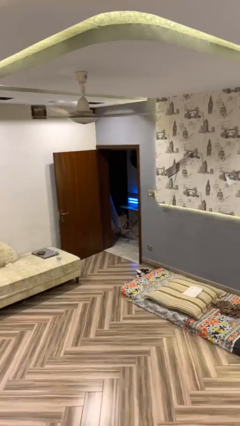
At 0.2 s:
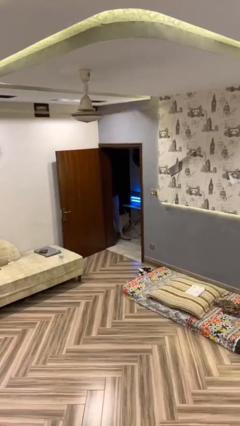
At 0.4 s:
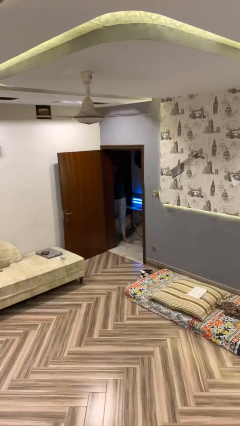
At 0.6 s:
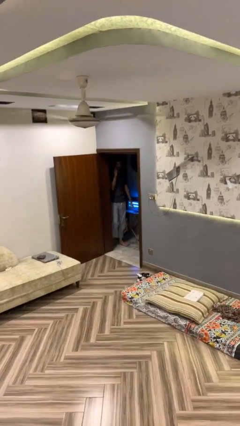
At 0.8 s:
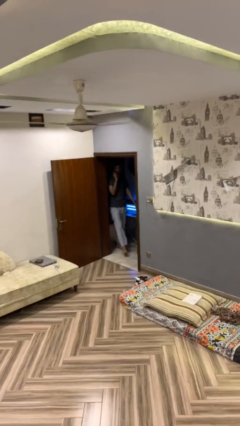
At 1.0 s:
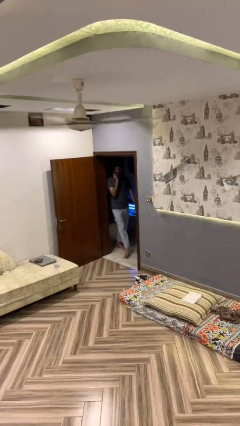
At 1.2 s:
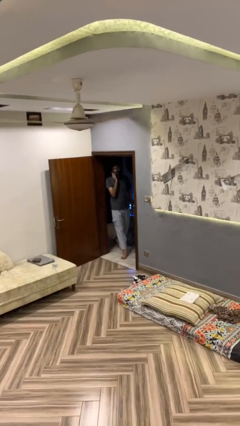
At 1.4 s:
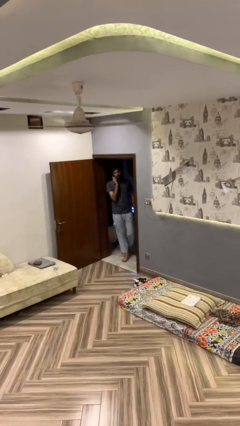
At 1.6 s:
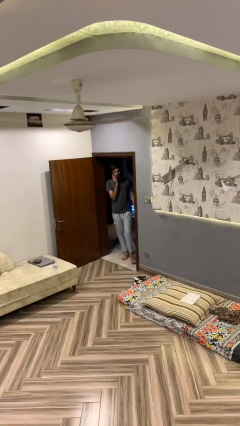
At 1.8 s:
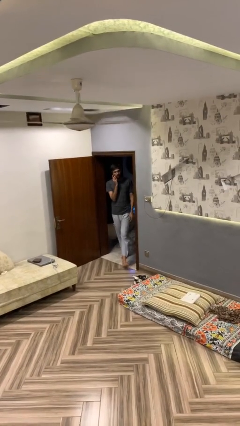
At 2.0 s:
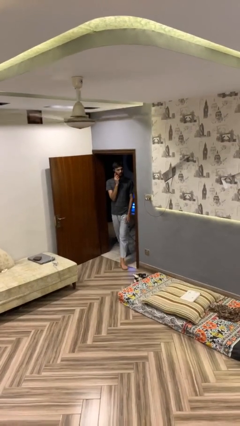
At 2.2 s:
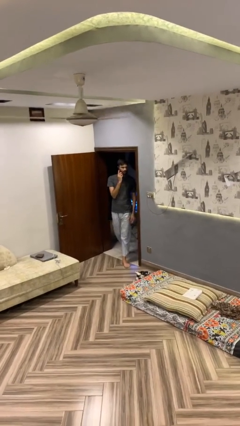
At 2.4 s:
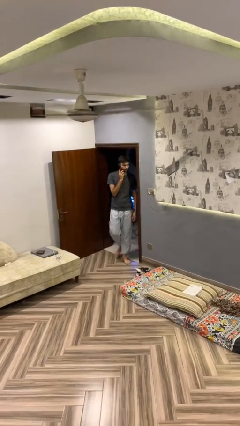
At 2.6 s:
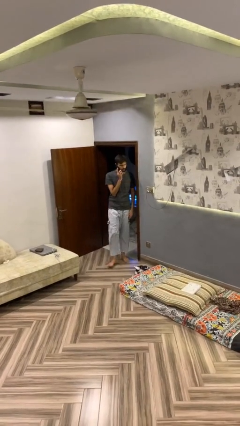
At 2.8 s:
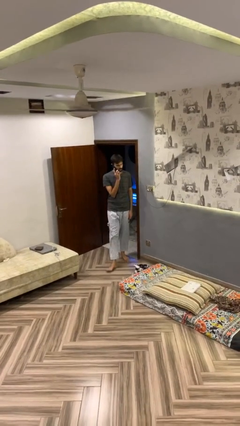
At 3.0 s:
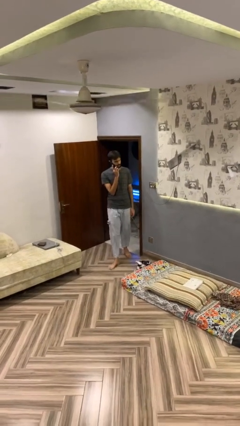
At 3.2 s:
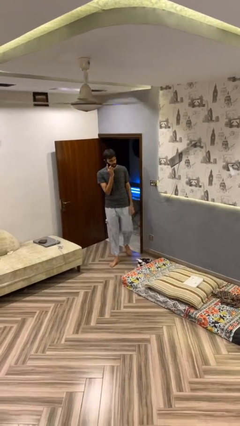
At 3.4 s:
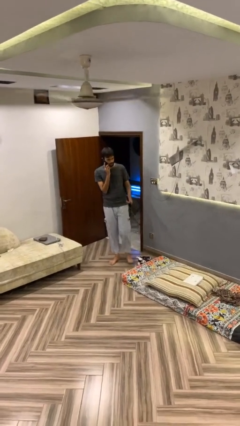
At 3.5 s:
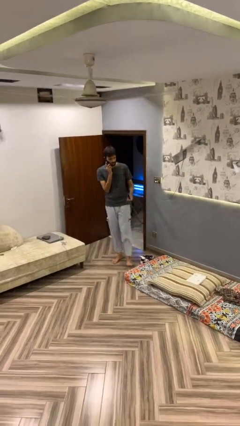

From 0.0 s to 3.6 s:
person enters scene through structure

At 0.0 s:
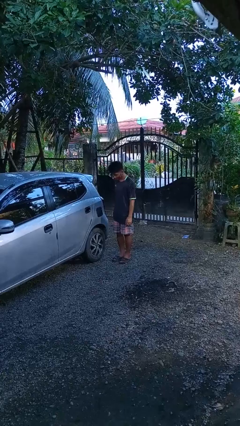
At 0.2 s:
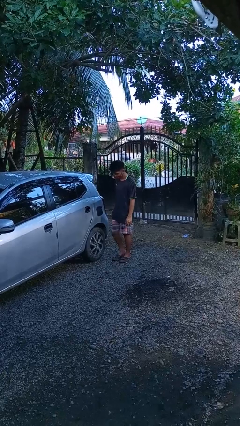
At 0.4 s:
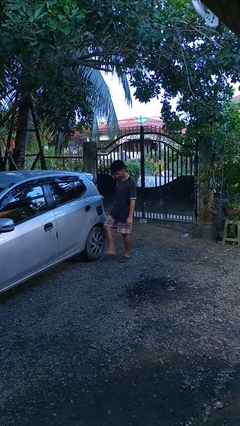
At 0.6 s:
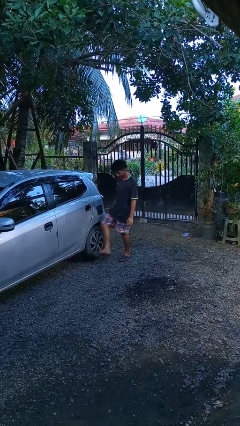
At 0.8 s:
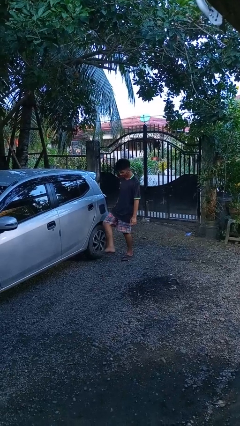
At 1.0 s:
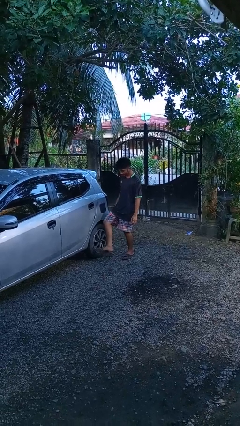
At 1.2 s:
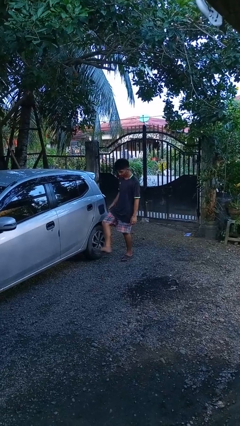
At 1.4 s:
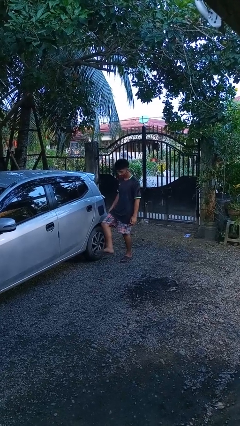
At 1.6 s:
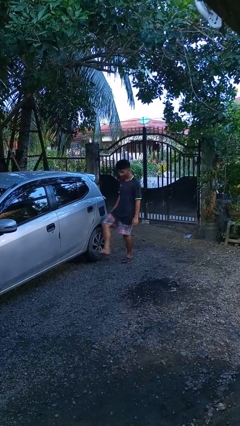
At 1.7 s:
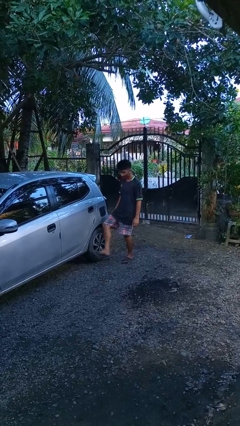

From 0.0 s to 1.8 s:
person kicks car tires

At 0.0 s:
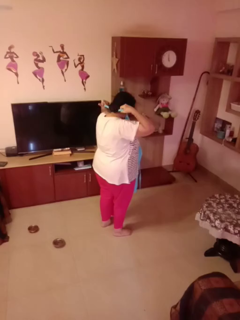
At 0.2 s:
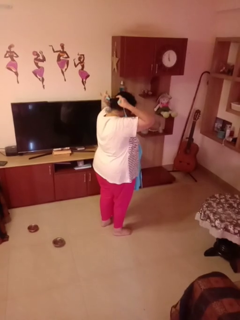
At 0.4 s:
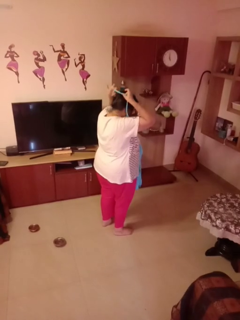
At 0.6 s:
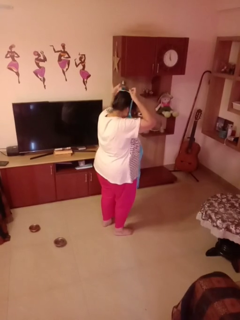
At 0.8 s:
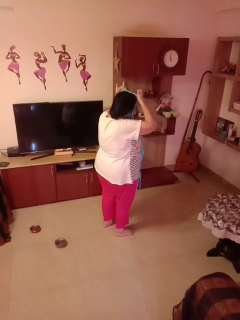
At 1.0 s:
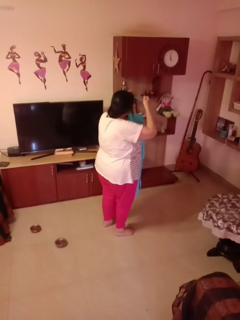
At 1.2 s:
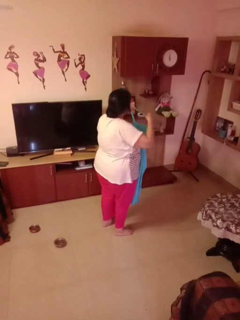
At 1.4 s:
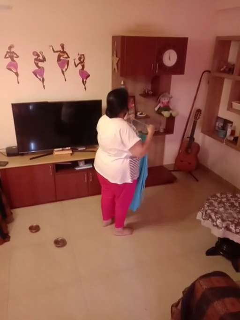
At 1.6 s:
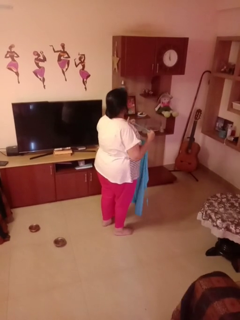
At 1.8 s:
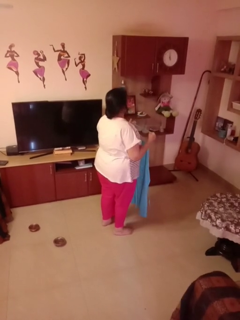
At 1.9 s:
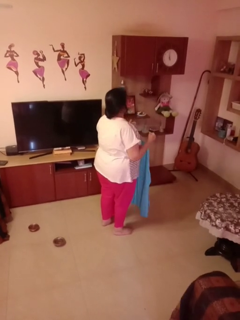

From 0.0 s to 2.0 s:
person takes off apron

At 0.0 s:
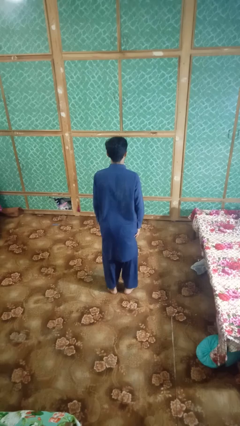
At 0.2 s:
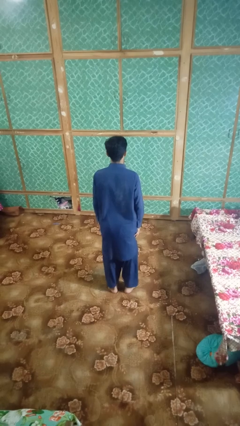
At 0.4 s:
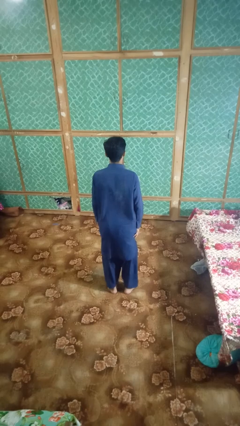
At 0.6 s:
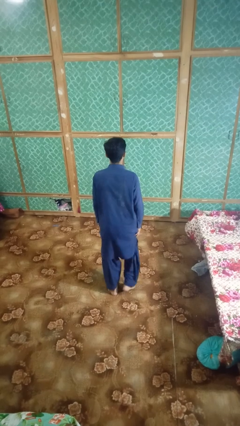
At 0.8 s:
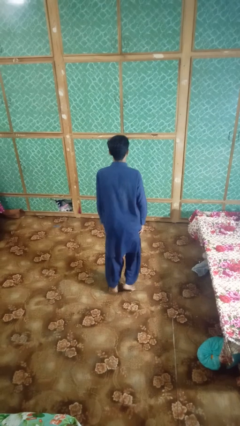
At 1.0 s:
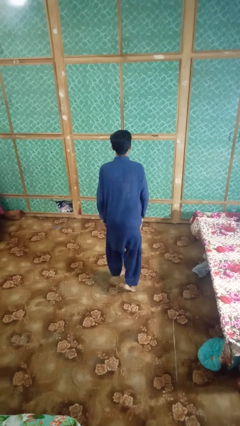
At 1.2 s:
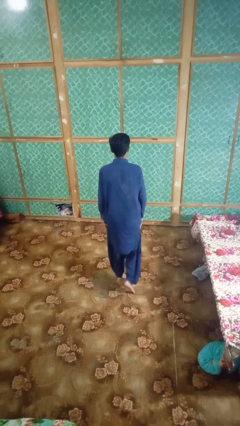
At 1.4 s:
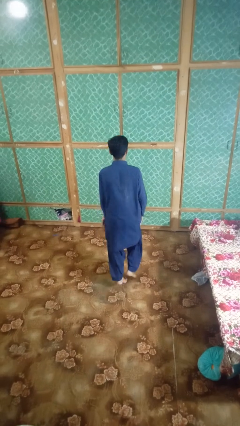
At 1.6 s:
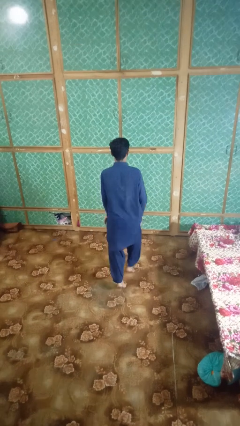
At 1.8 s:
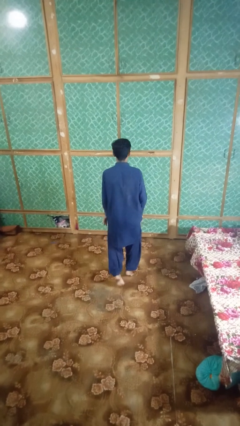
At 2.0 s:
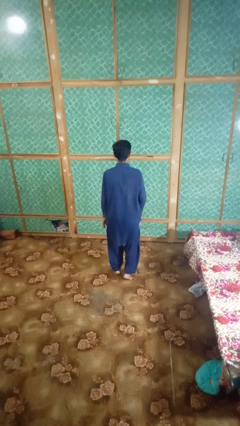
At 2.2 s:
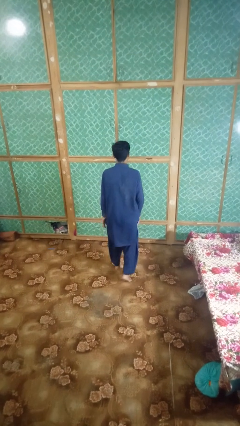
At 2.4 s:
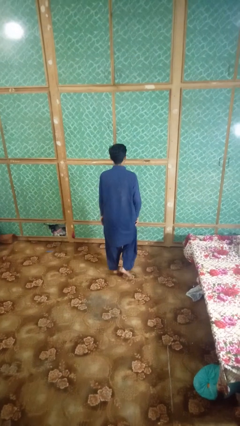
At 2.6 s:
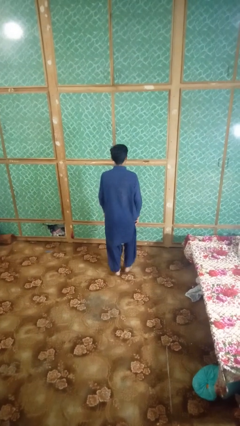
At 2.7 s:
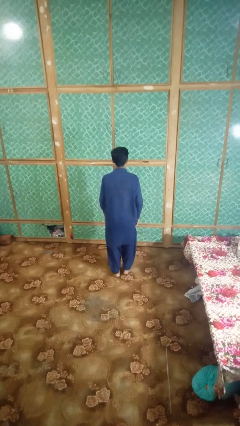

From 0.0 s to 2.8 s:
person walks tiptoe

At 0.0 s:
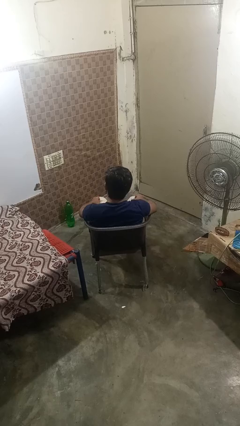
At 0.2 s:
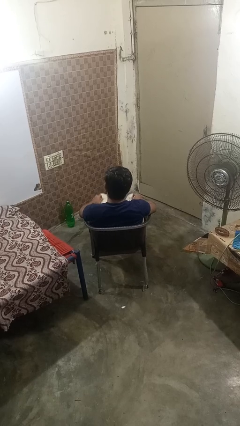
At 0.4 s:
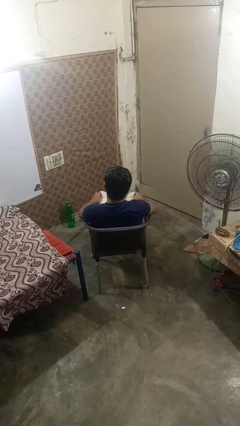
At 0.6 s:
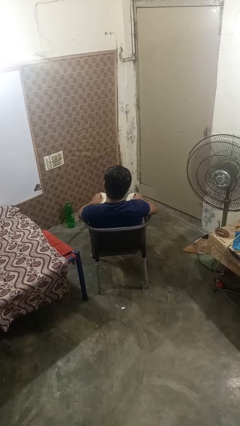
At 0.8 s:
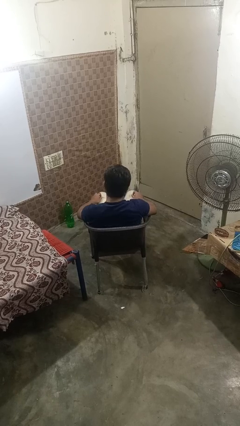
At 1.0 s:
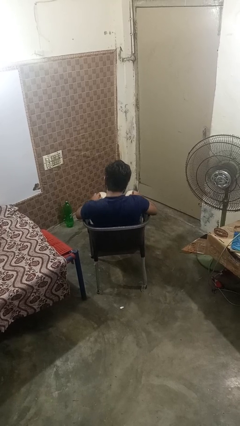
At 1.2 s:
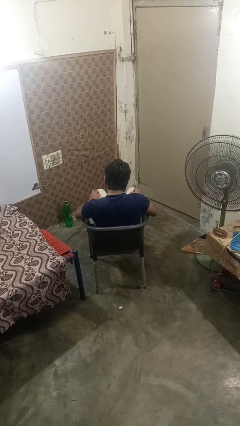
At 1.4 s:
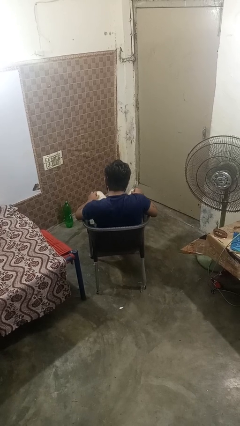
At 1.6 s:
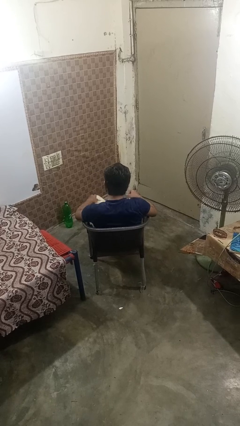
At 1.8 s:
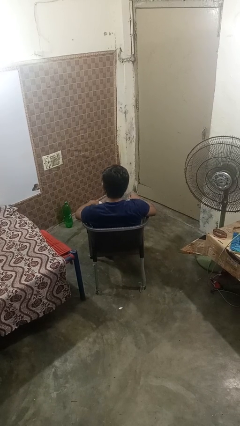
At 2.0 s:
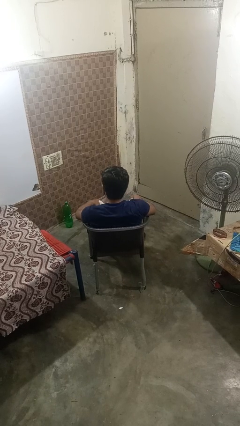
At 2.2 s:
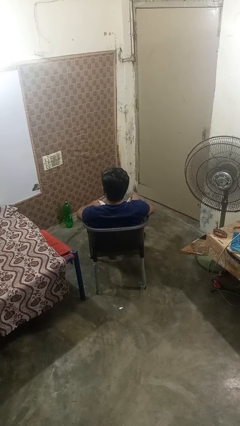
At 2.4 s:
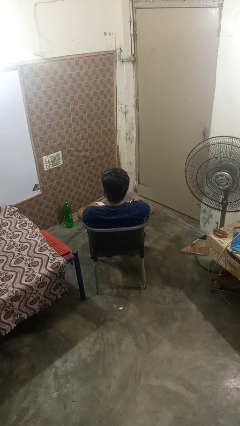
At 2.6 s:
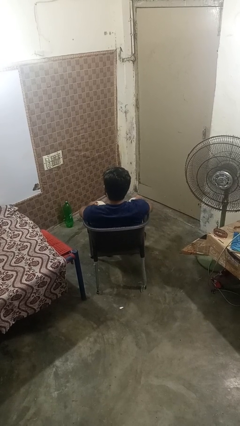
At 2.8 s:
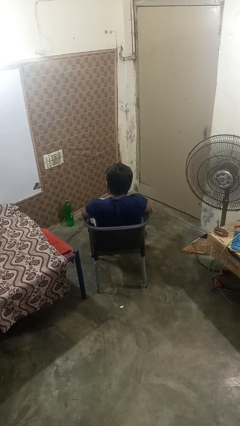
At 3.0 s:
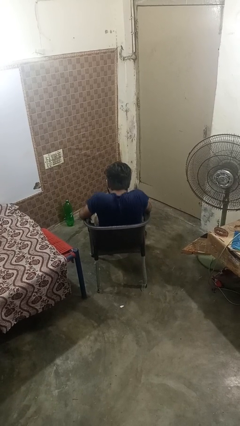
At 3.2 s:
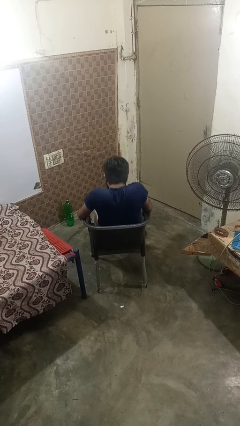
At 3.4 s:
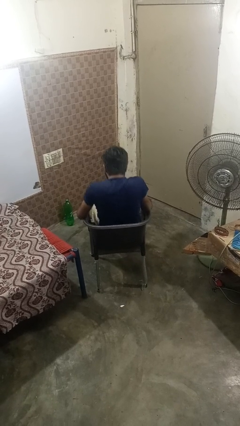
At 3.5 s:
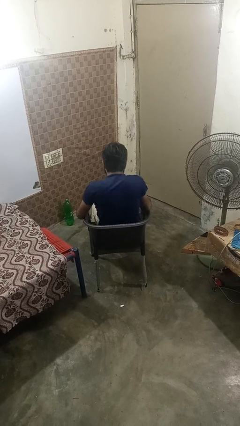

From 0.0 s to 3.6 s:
person takes off shoes

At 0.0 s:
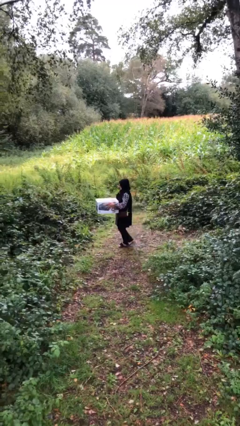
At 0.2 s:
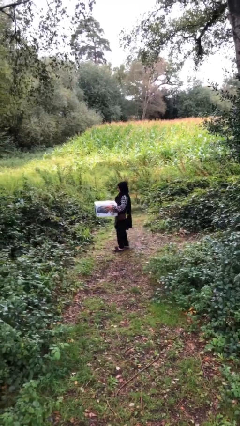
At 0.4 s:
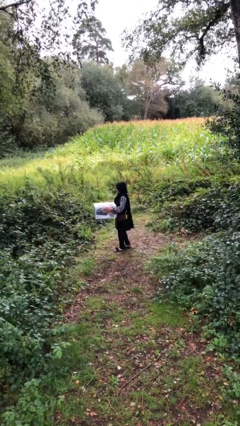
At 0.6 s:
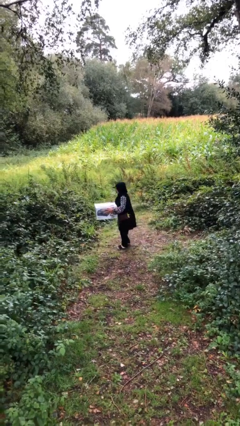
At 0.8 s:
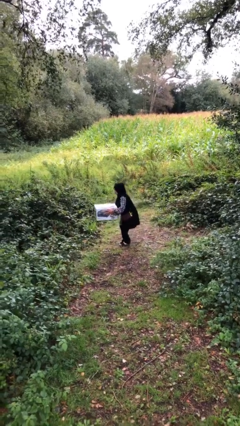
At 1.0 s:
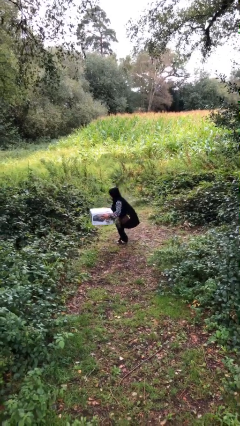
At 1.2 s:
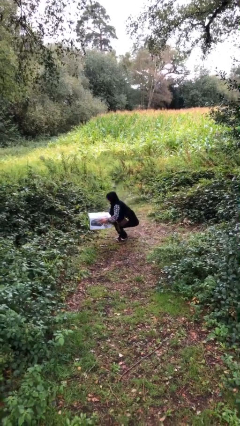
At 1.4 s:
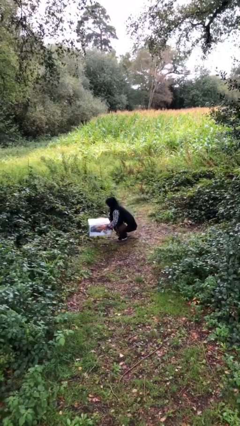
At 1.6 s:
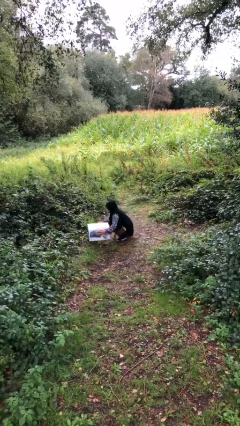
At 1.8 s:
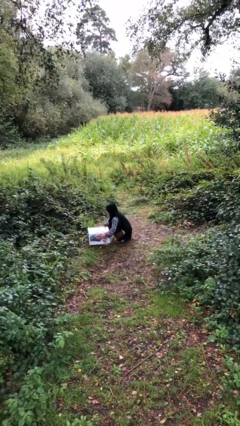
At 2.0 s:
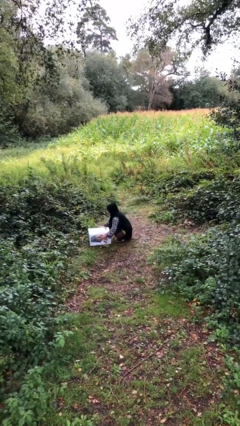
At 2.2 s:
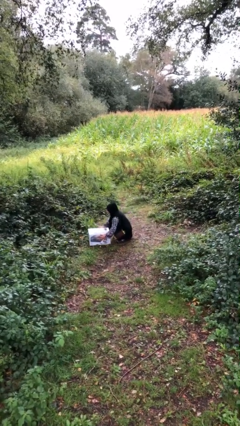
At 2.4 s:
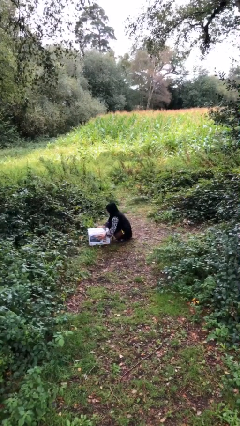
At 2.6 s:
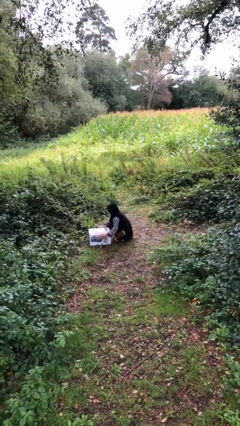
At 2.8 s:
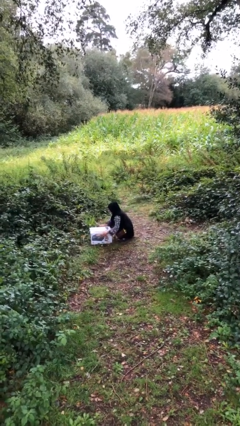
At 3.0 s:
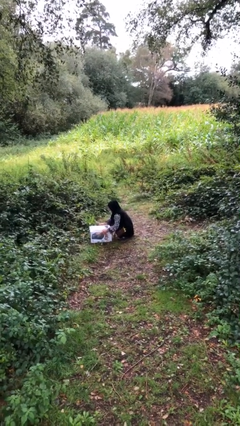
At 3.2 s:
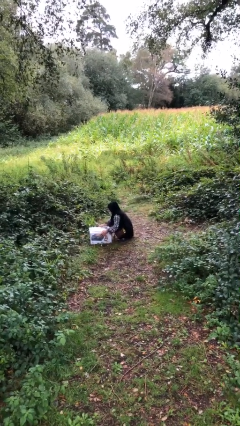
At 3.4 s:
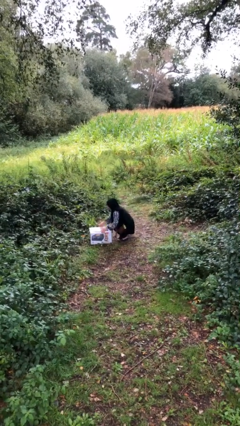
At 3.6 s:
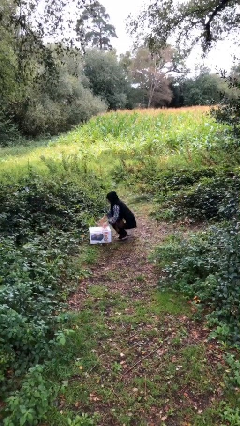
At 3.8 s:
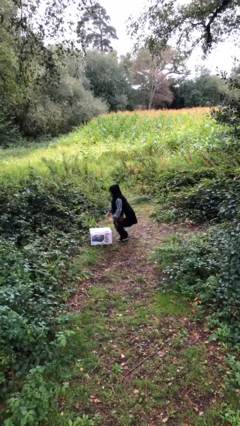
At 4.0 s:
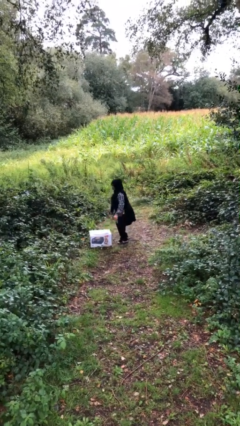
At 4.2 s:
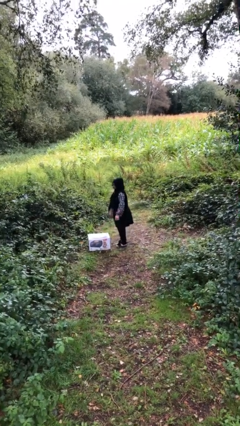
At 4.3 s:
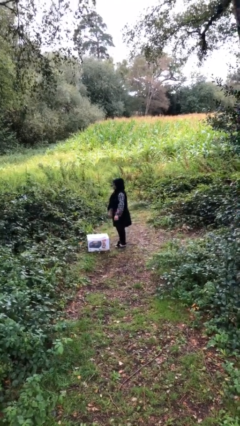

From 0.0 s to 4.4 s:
person puts down object on floor
